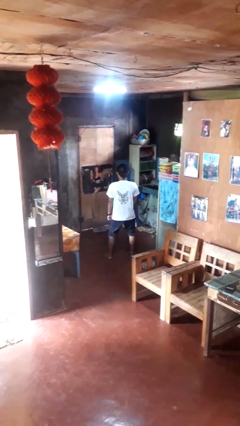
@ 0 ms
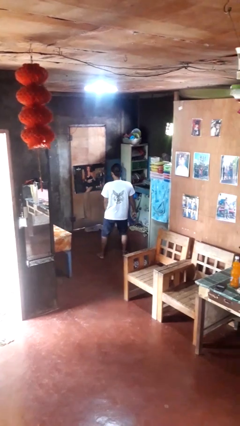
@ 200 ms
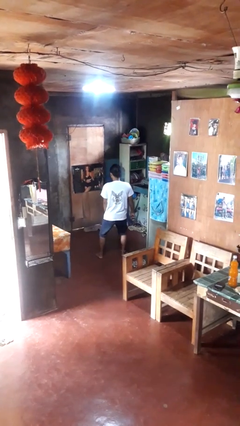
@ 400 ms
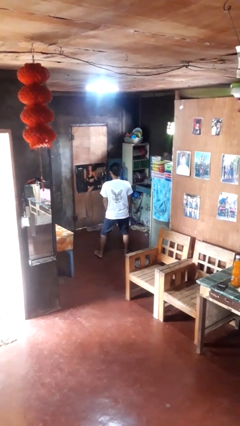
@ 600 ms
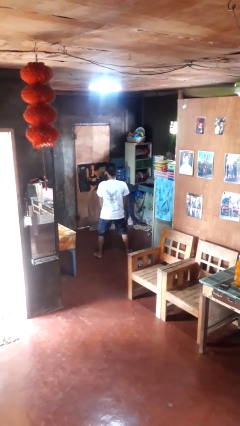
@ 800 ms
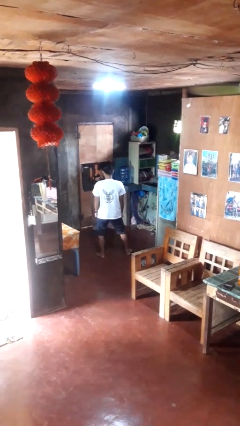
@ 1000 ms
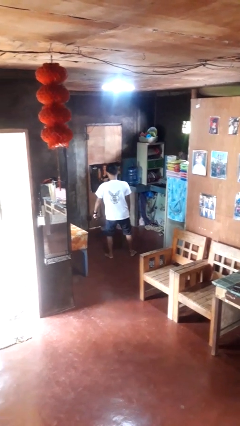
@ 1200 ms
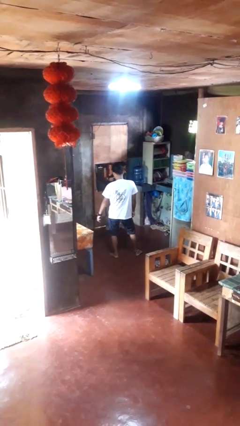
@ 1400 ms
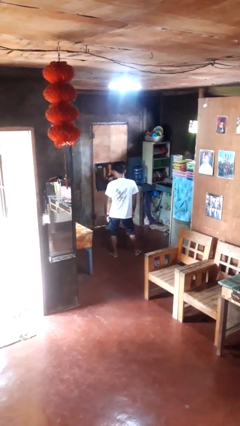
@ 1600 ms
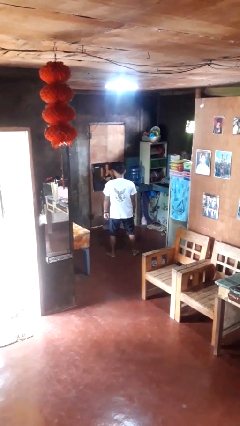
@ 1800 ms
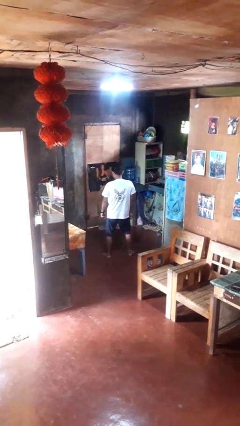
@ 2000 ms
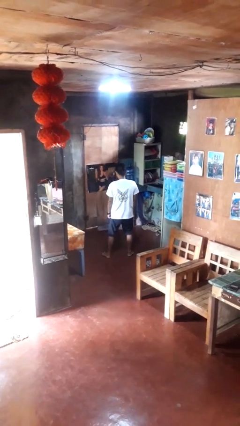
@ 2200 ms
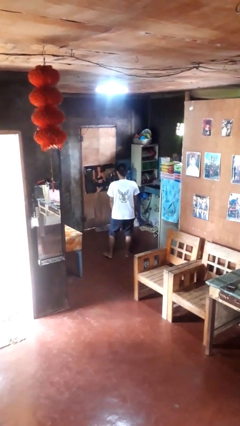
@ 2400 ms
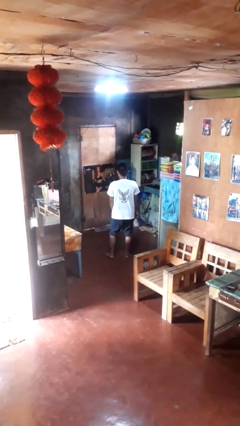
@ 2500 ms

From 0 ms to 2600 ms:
person dances in place

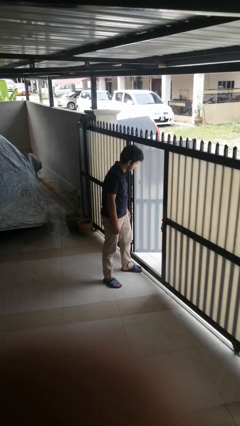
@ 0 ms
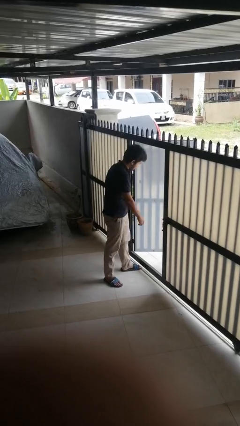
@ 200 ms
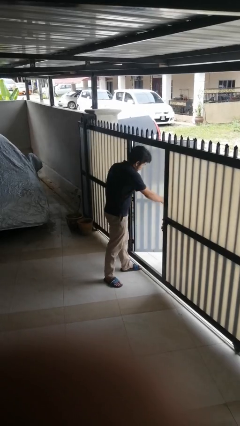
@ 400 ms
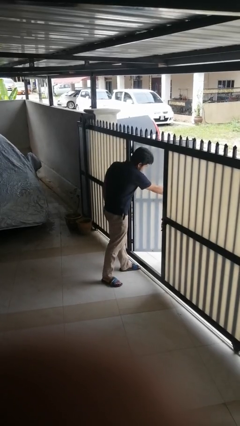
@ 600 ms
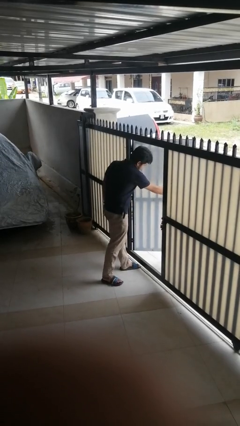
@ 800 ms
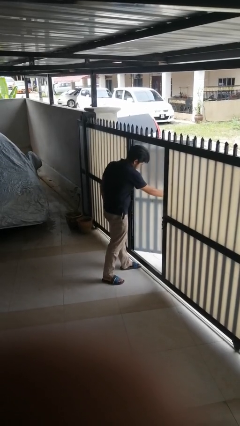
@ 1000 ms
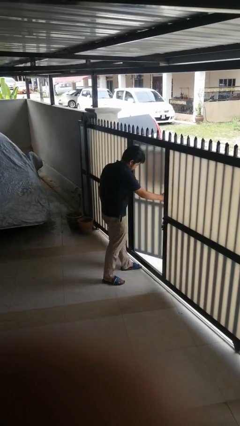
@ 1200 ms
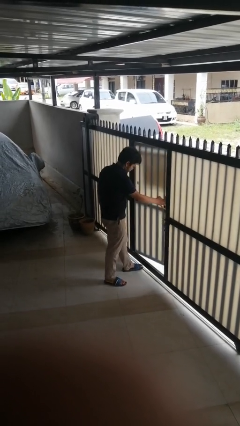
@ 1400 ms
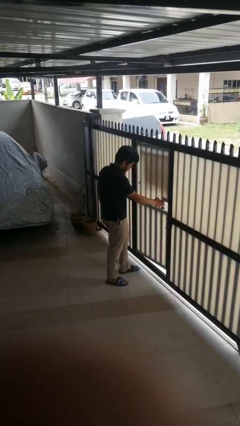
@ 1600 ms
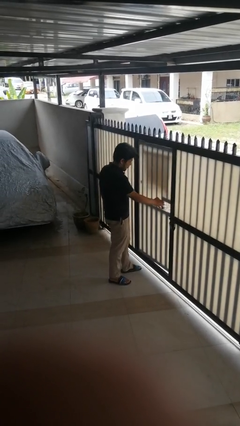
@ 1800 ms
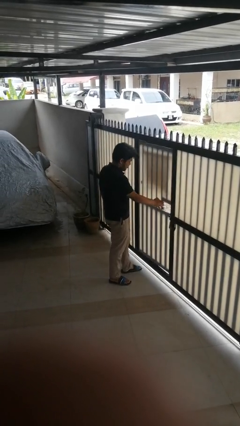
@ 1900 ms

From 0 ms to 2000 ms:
person closes gate

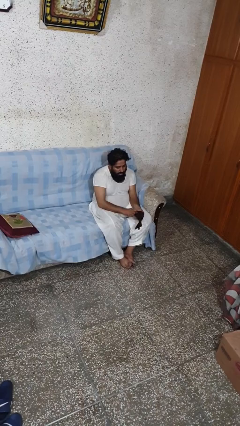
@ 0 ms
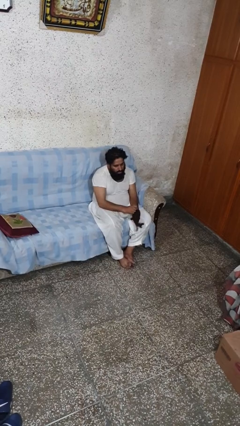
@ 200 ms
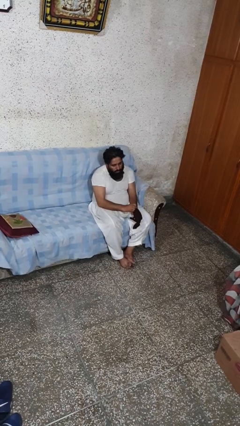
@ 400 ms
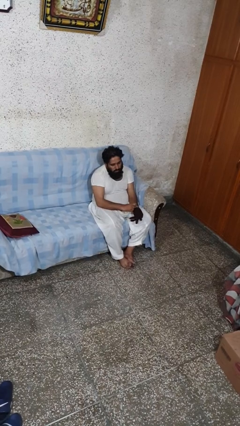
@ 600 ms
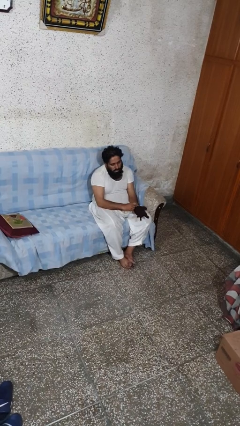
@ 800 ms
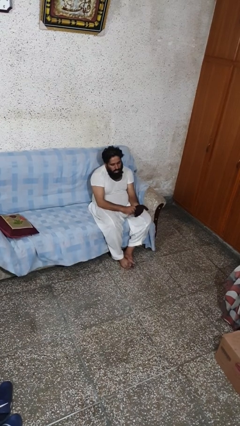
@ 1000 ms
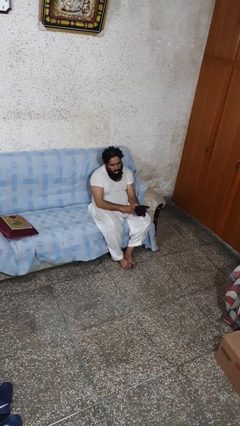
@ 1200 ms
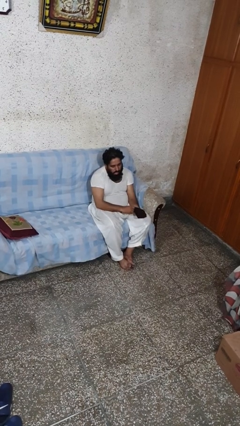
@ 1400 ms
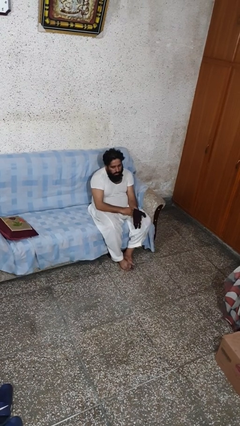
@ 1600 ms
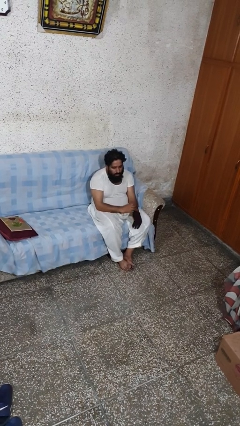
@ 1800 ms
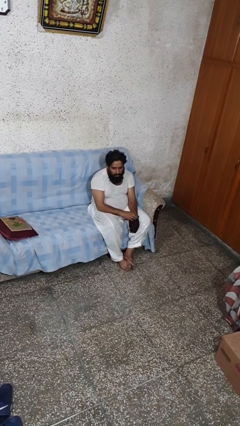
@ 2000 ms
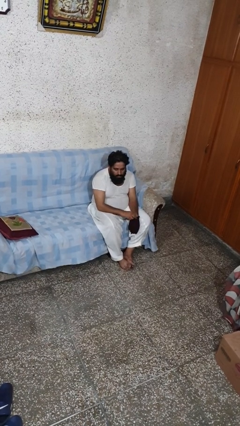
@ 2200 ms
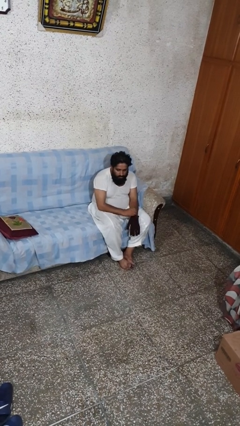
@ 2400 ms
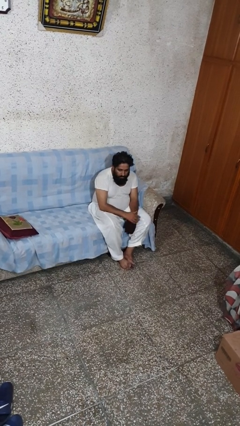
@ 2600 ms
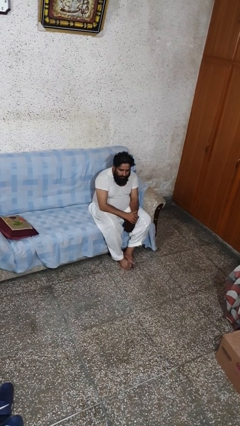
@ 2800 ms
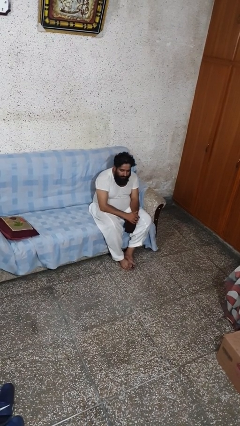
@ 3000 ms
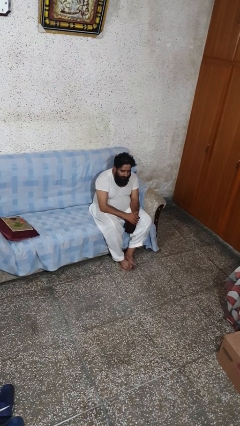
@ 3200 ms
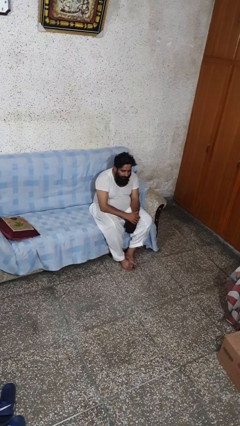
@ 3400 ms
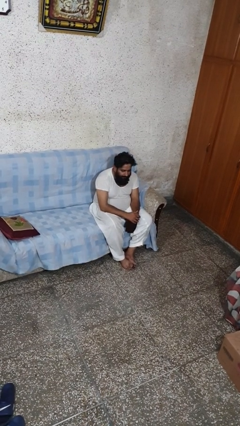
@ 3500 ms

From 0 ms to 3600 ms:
person puts on gloves

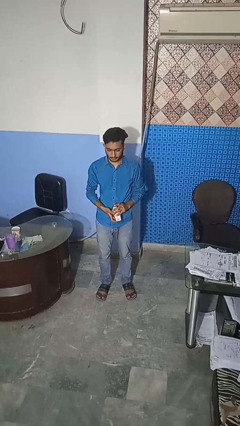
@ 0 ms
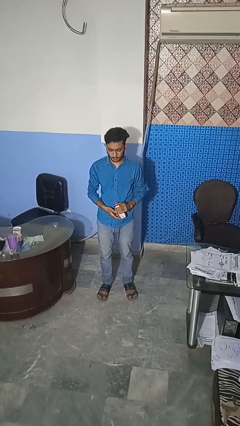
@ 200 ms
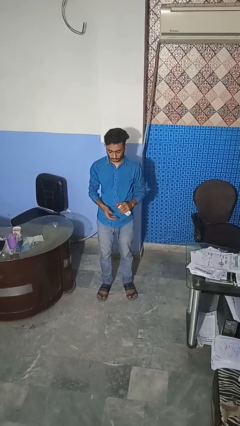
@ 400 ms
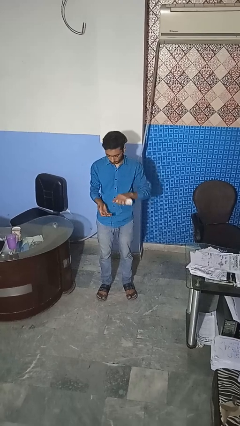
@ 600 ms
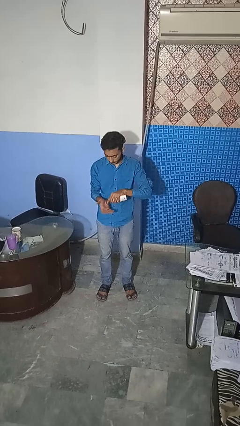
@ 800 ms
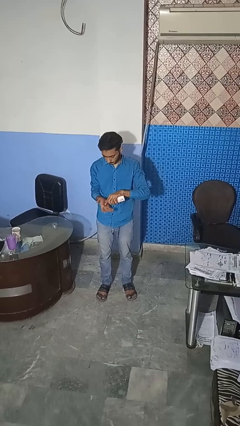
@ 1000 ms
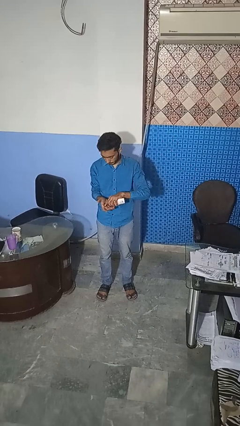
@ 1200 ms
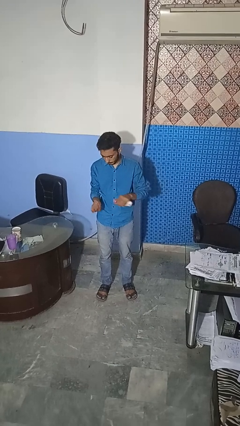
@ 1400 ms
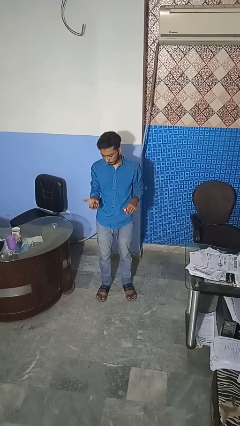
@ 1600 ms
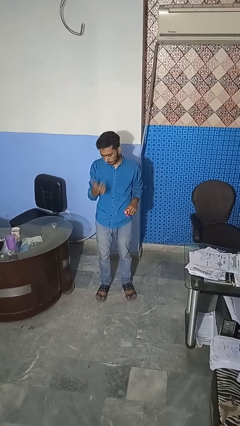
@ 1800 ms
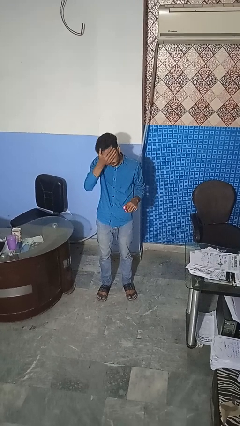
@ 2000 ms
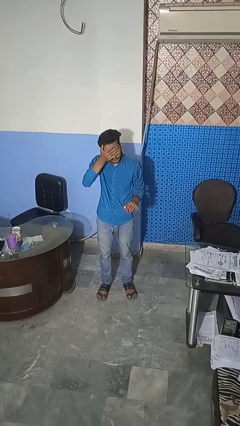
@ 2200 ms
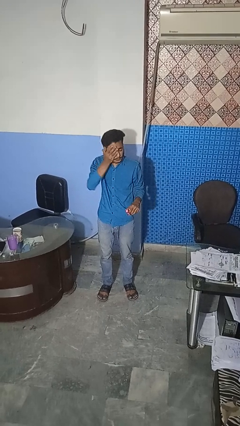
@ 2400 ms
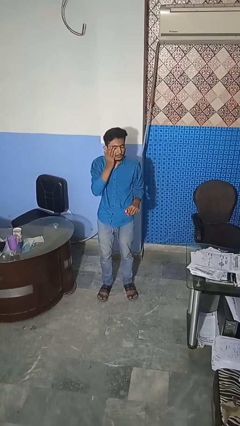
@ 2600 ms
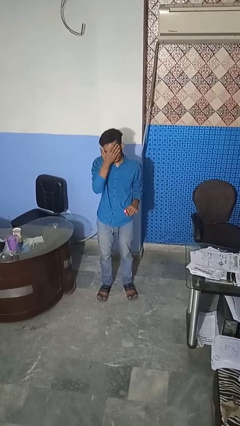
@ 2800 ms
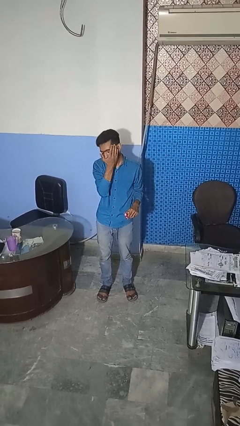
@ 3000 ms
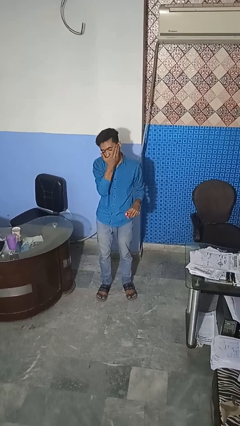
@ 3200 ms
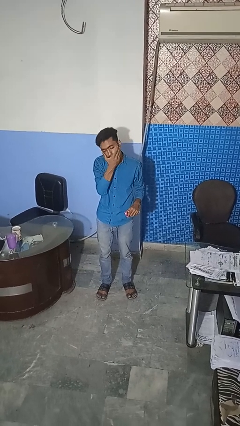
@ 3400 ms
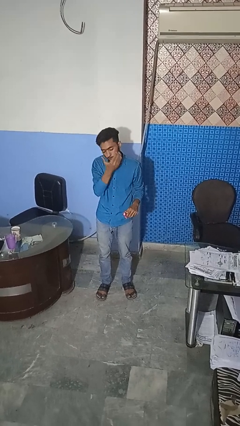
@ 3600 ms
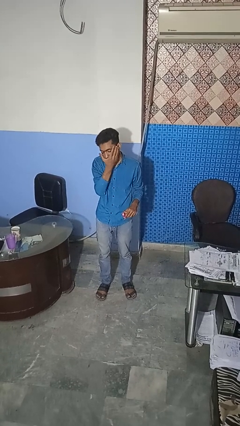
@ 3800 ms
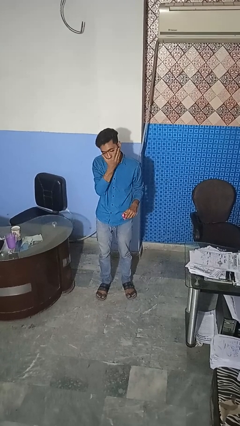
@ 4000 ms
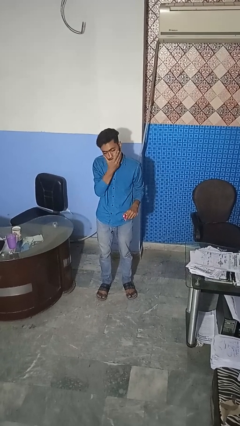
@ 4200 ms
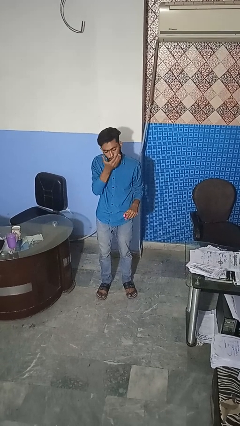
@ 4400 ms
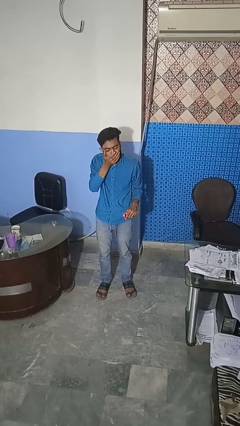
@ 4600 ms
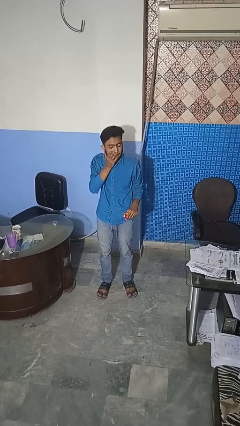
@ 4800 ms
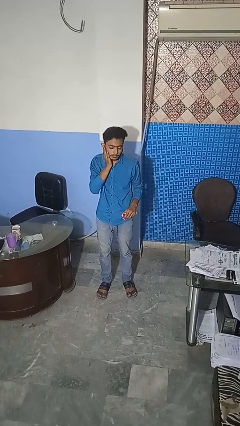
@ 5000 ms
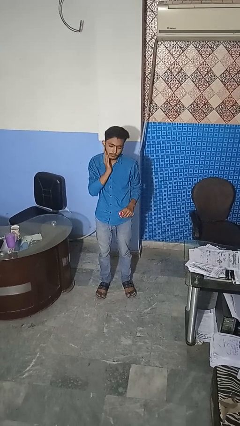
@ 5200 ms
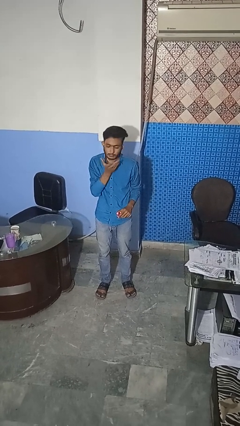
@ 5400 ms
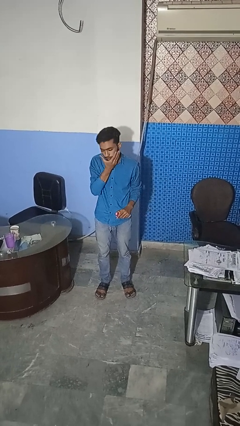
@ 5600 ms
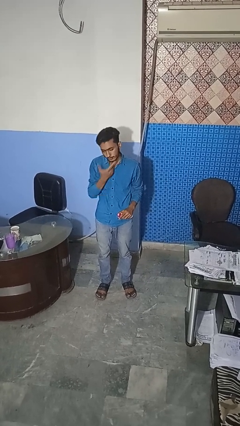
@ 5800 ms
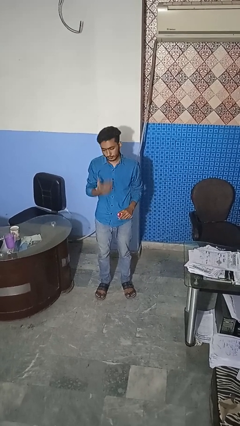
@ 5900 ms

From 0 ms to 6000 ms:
person applies facial moisturizer

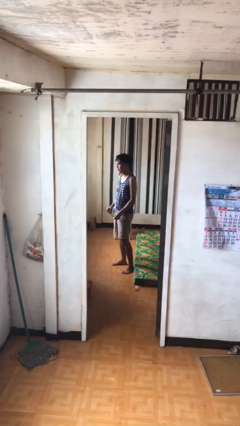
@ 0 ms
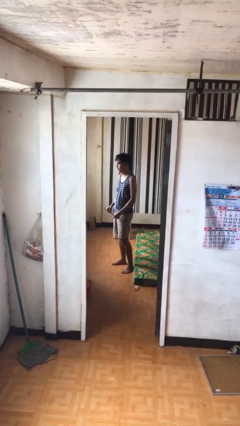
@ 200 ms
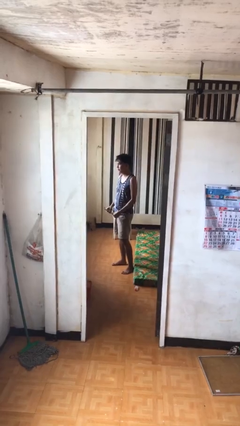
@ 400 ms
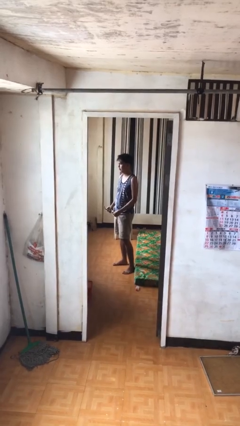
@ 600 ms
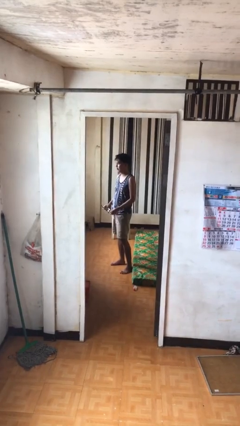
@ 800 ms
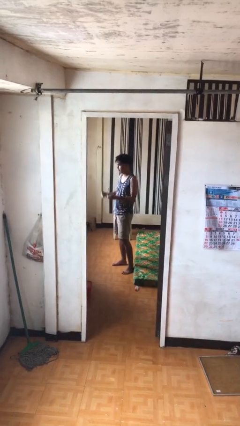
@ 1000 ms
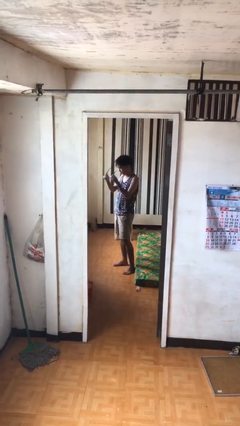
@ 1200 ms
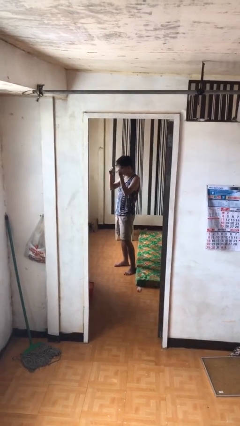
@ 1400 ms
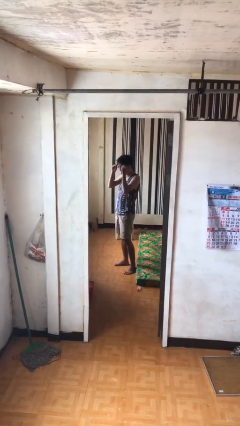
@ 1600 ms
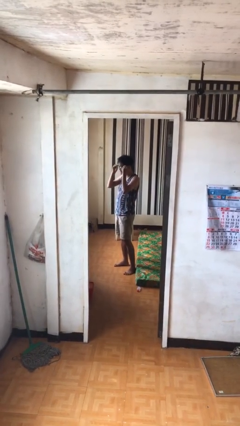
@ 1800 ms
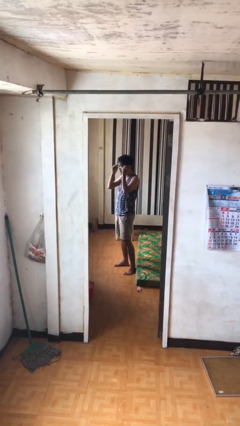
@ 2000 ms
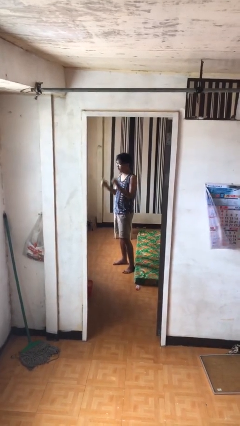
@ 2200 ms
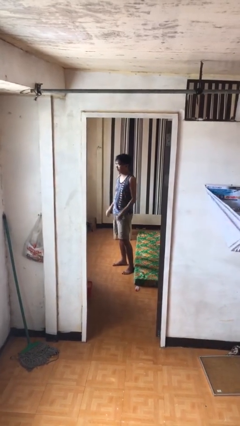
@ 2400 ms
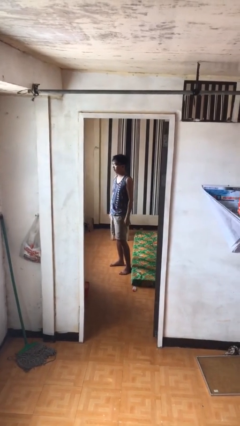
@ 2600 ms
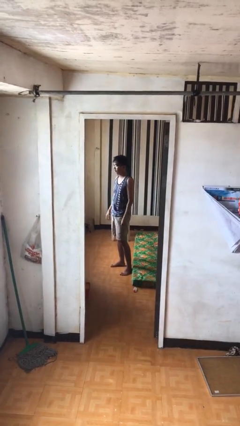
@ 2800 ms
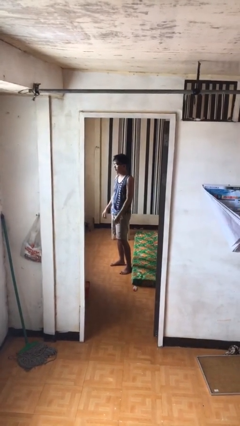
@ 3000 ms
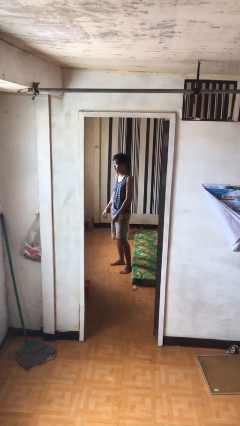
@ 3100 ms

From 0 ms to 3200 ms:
person puts on glasses
